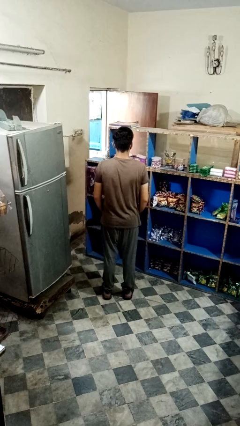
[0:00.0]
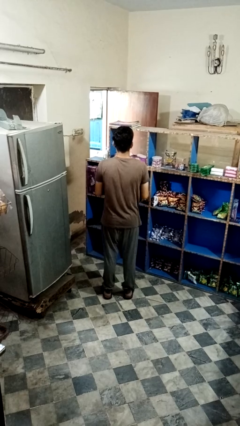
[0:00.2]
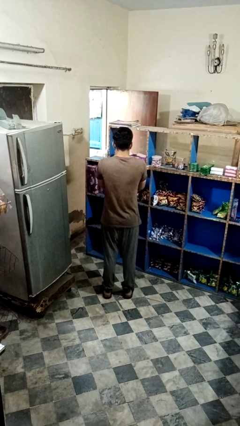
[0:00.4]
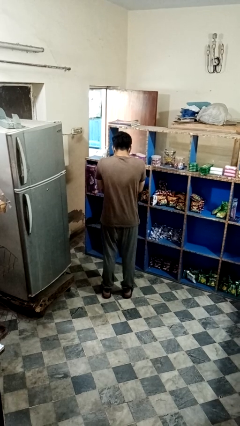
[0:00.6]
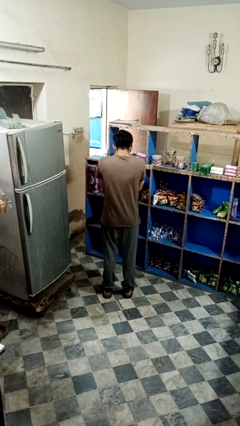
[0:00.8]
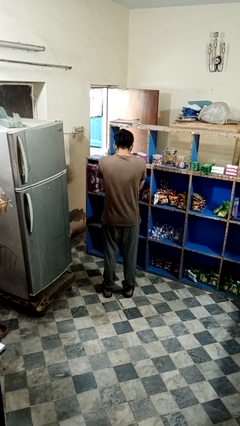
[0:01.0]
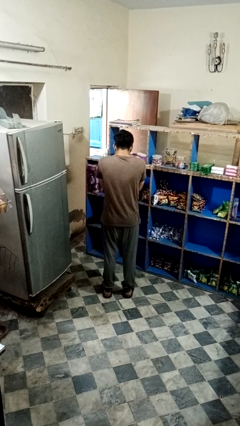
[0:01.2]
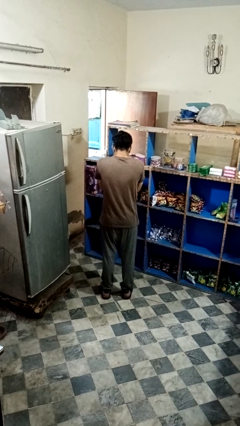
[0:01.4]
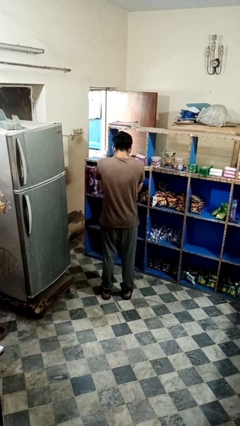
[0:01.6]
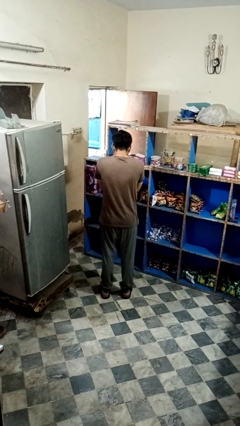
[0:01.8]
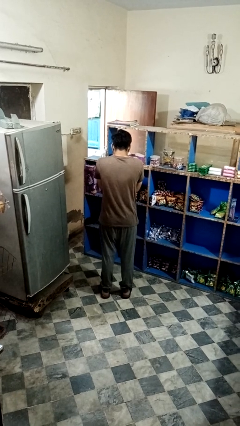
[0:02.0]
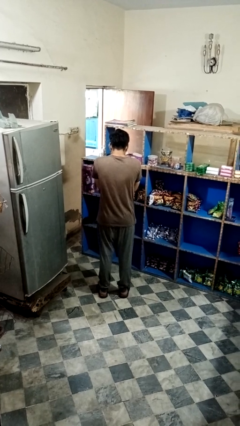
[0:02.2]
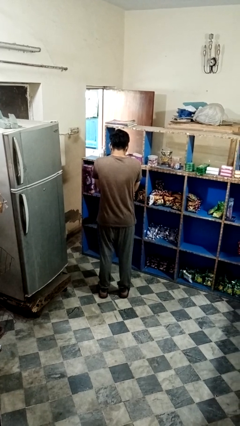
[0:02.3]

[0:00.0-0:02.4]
person sneezes into hand

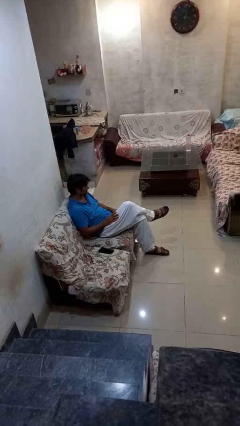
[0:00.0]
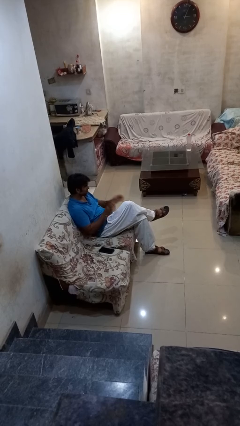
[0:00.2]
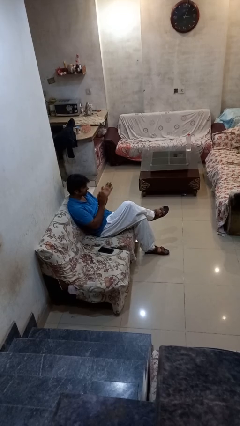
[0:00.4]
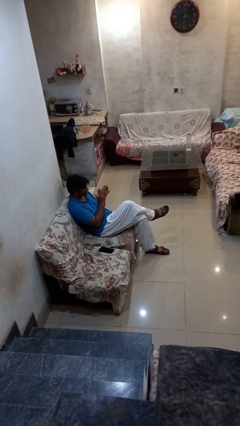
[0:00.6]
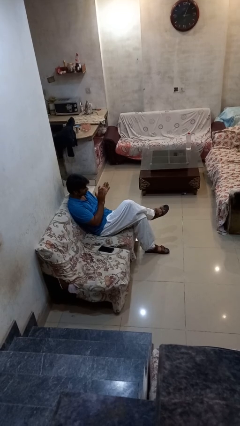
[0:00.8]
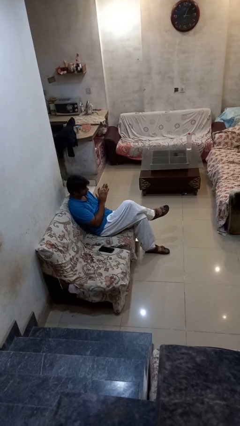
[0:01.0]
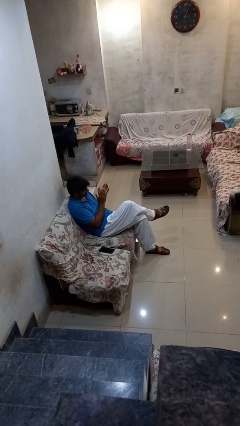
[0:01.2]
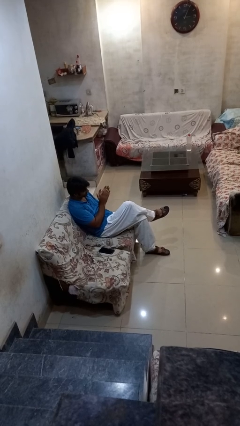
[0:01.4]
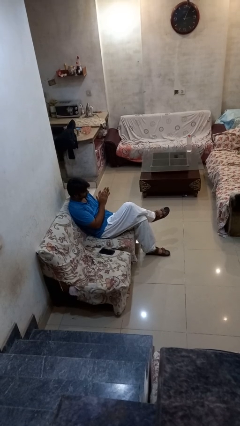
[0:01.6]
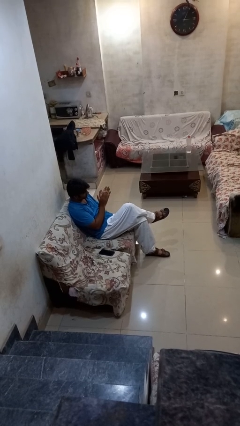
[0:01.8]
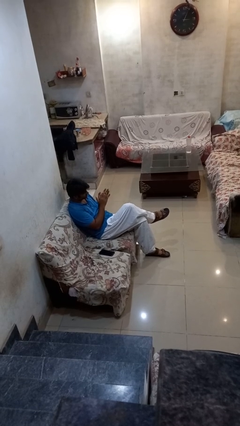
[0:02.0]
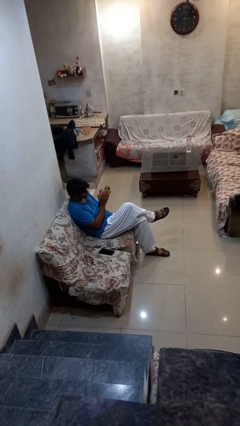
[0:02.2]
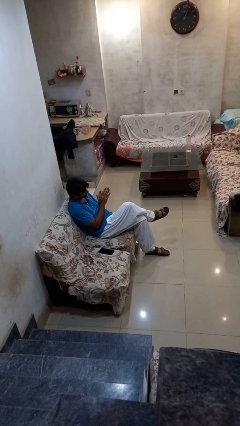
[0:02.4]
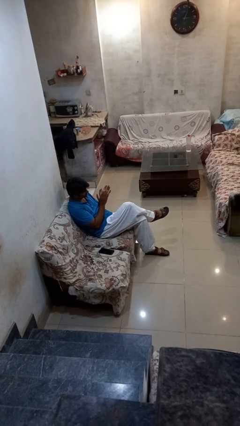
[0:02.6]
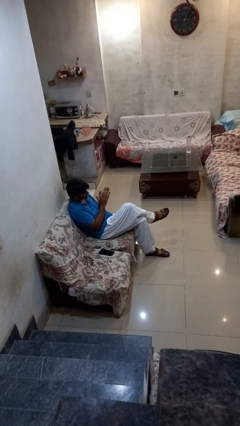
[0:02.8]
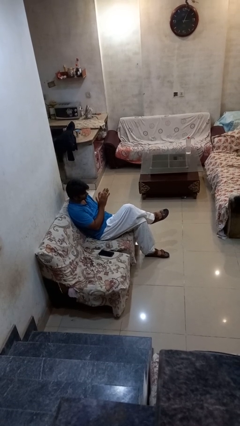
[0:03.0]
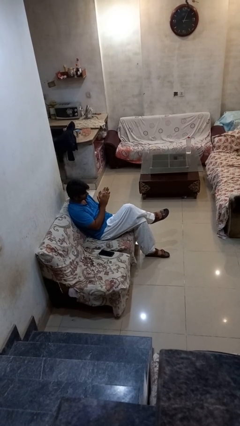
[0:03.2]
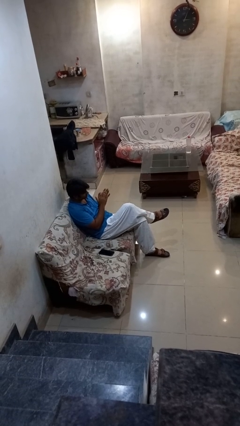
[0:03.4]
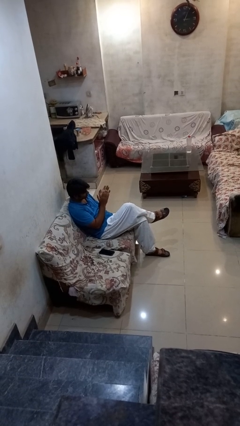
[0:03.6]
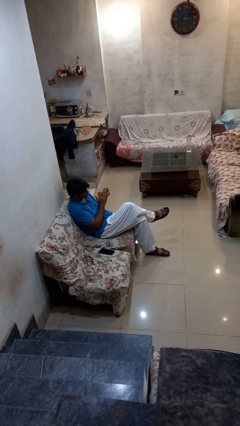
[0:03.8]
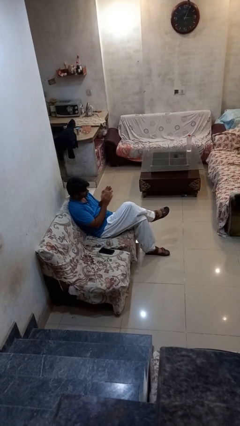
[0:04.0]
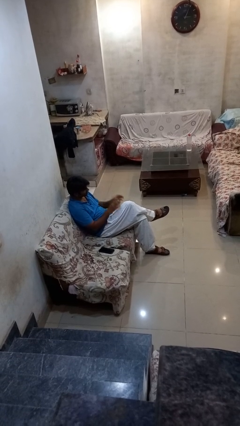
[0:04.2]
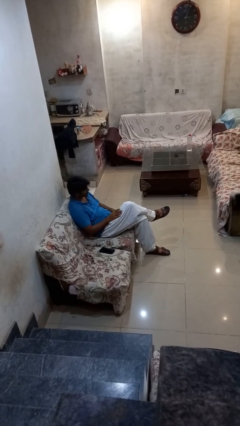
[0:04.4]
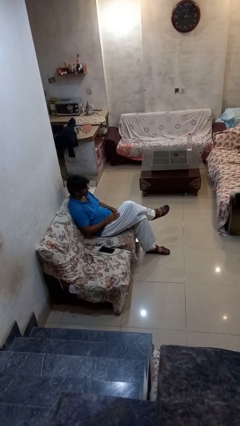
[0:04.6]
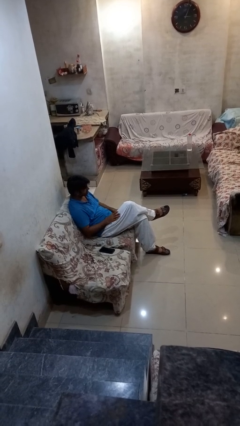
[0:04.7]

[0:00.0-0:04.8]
person claps hands

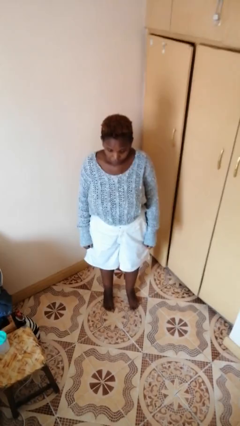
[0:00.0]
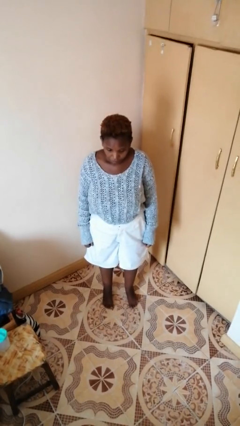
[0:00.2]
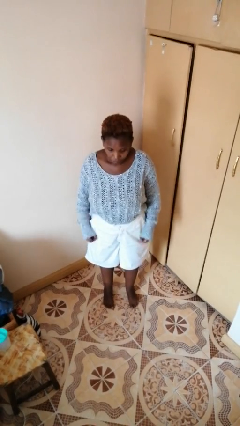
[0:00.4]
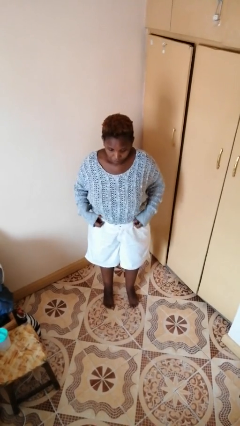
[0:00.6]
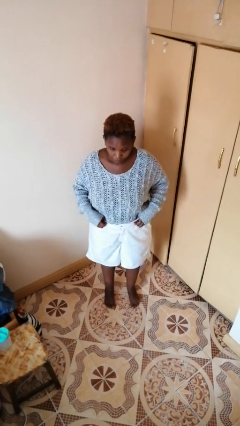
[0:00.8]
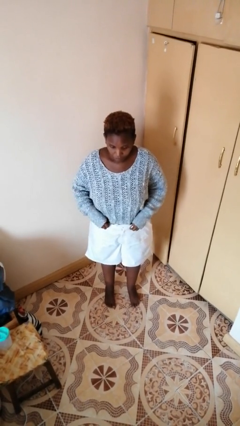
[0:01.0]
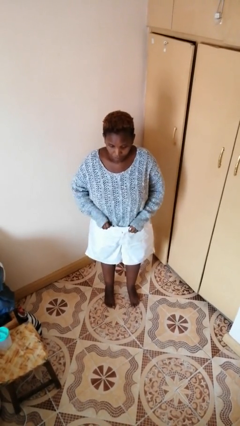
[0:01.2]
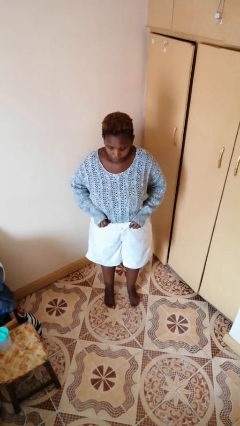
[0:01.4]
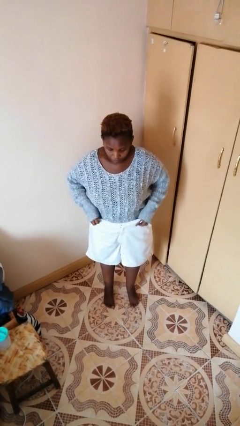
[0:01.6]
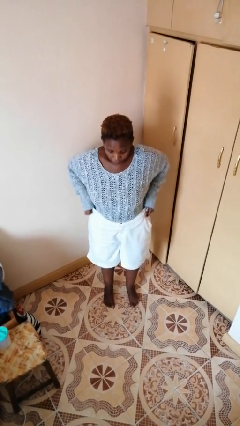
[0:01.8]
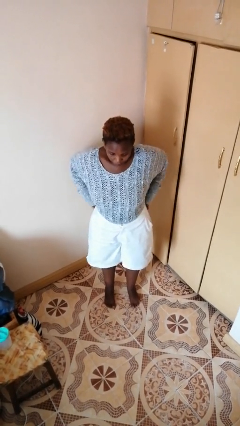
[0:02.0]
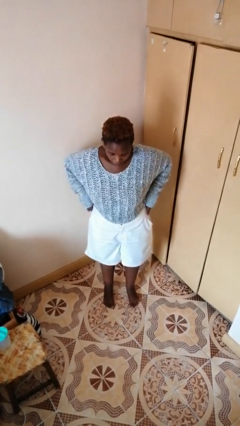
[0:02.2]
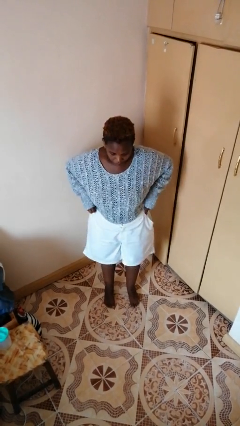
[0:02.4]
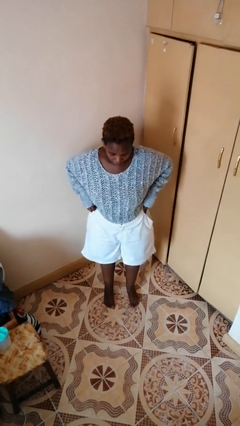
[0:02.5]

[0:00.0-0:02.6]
person hikes up pants

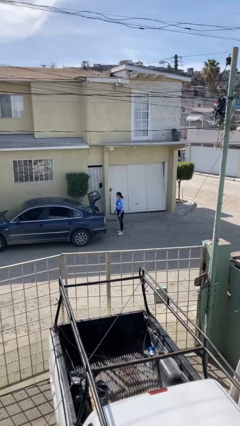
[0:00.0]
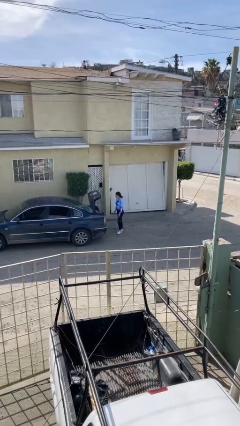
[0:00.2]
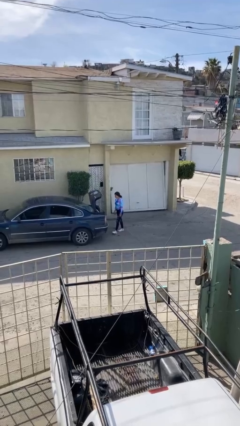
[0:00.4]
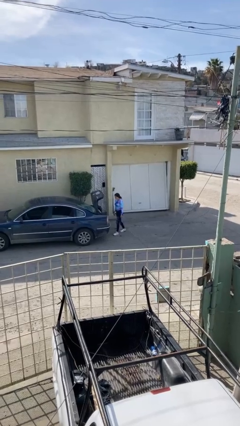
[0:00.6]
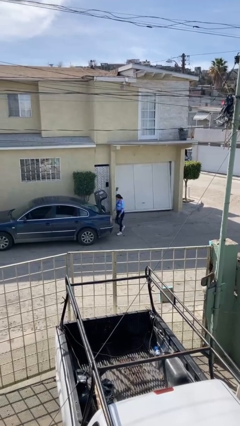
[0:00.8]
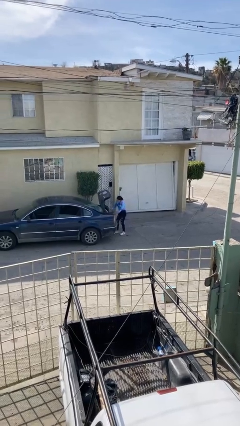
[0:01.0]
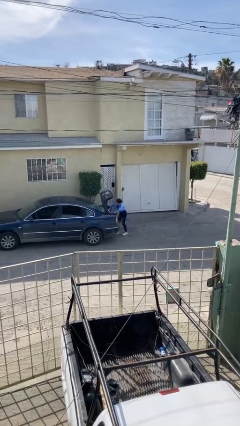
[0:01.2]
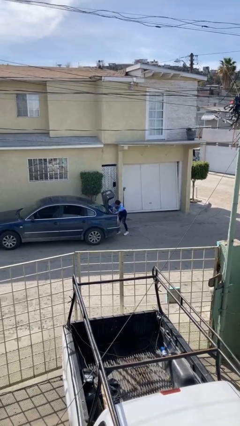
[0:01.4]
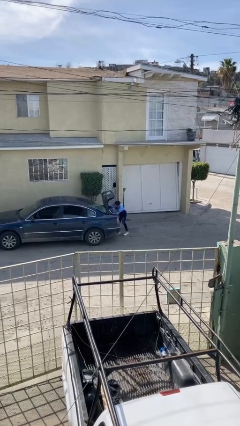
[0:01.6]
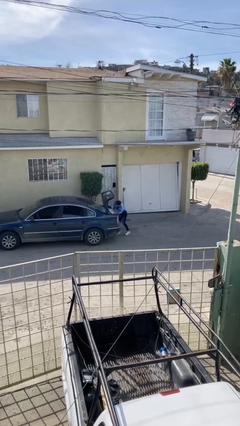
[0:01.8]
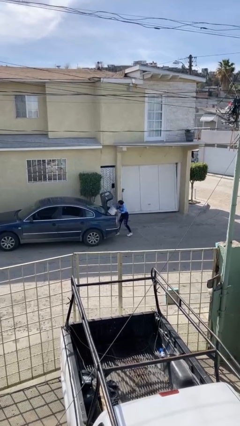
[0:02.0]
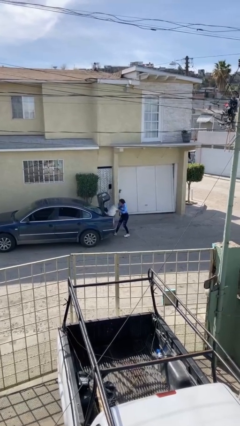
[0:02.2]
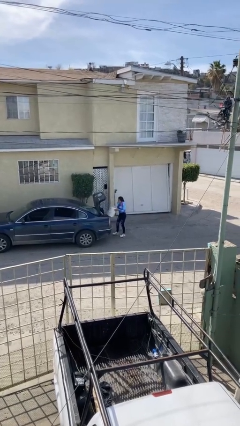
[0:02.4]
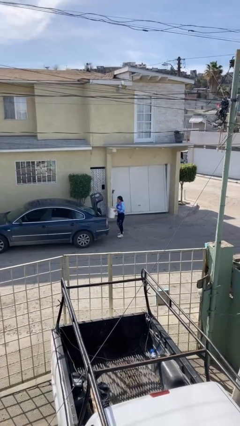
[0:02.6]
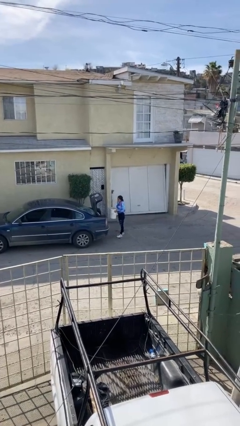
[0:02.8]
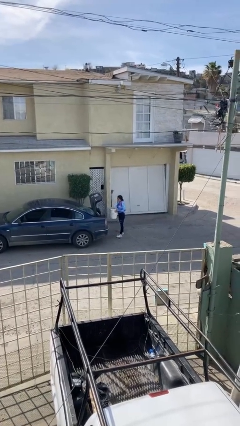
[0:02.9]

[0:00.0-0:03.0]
person unloads car

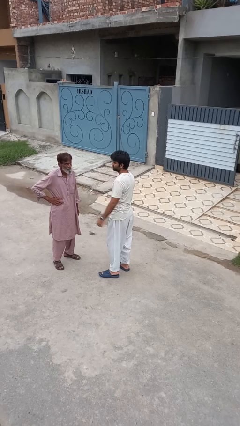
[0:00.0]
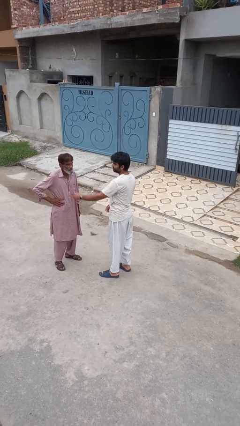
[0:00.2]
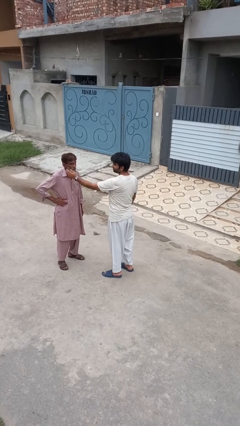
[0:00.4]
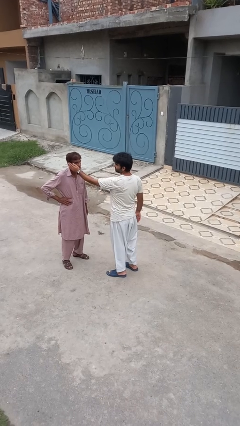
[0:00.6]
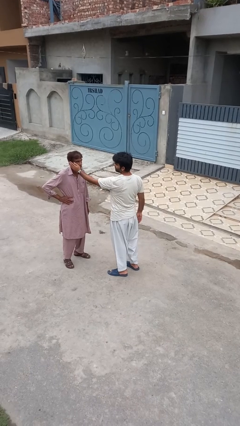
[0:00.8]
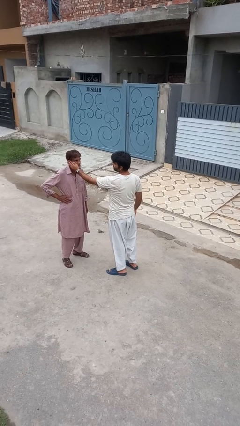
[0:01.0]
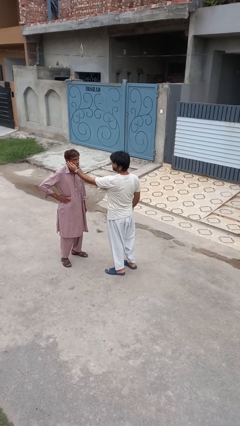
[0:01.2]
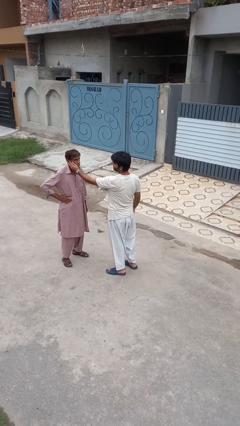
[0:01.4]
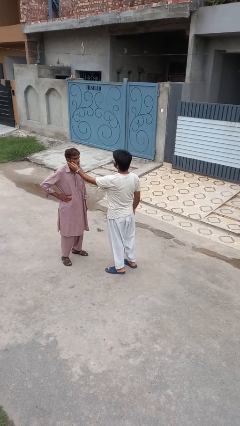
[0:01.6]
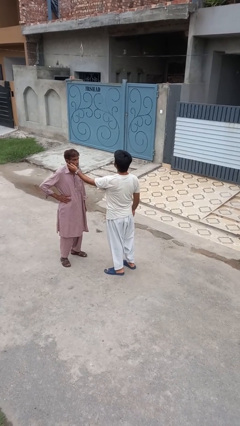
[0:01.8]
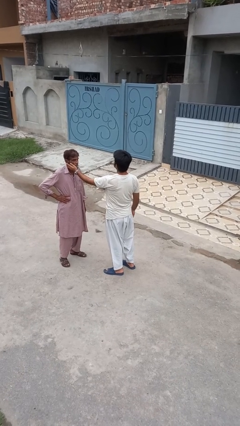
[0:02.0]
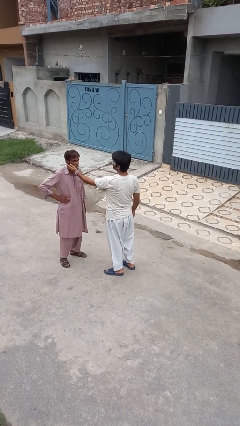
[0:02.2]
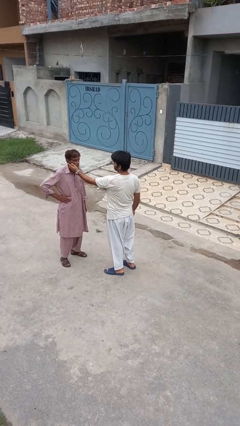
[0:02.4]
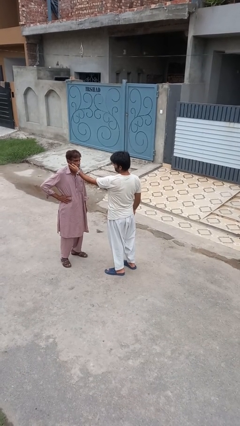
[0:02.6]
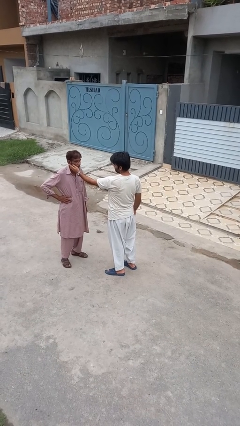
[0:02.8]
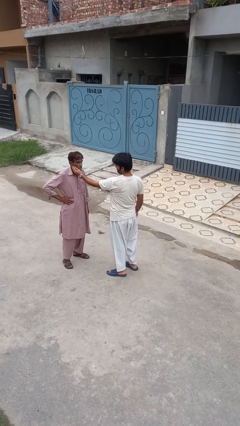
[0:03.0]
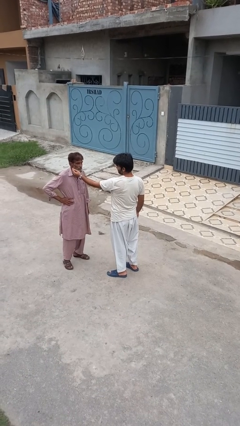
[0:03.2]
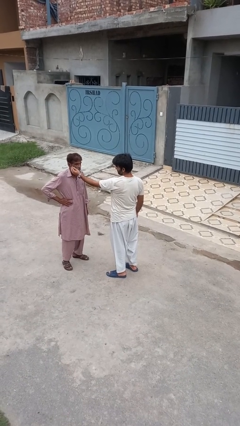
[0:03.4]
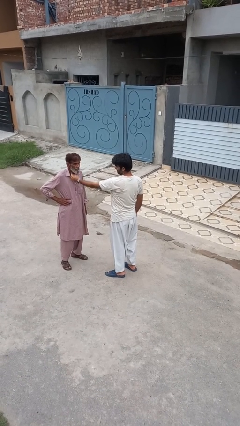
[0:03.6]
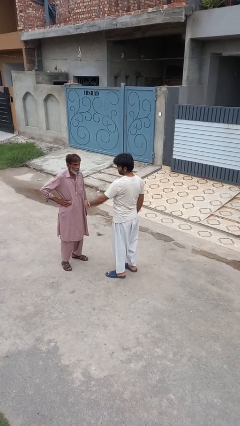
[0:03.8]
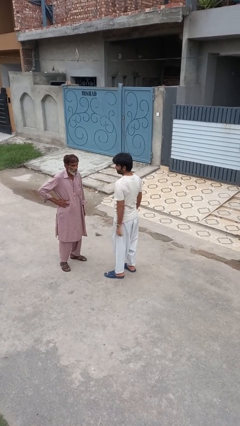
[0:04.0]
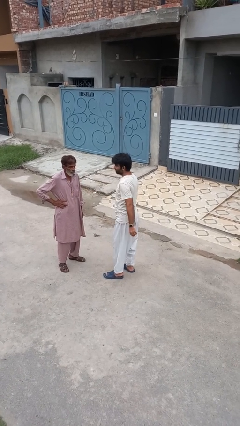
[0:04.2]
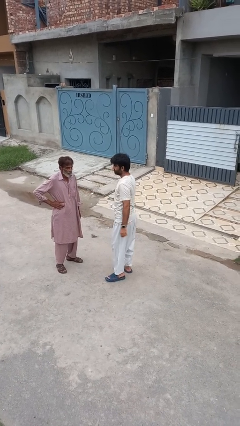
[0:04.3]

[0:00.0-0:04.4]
person touches face of person

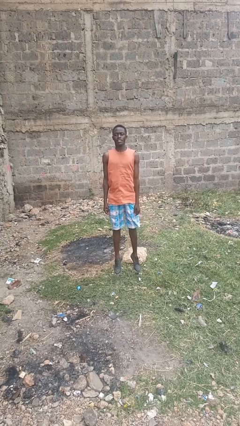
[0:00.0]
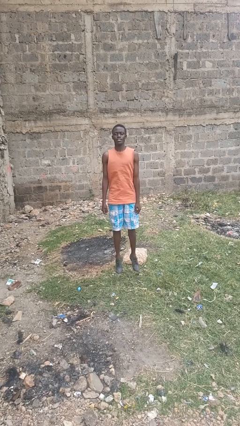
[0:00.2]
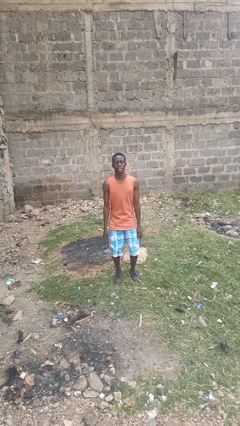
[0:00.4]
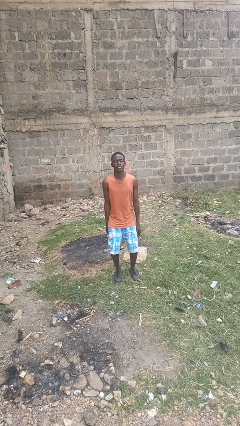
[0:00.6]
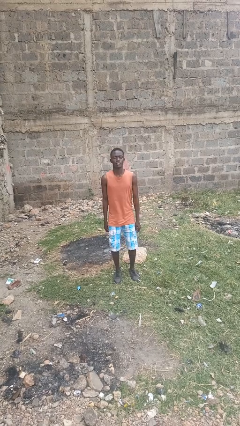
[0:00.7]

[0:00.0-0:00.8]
person jumps
